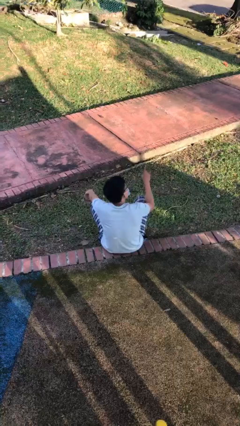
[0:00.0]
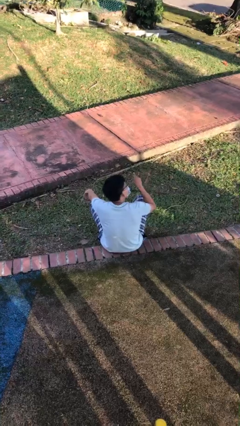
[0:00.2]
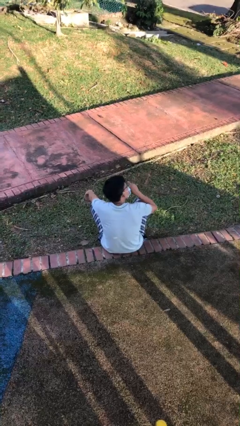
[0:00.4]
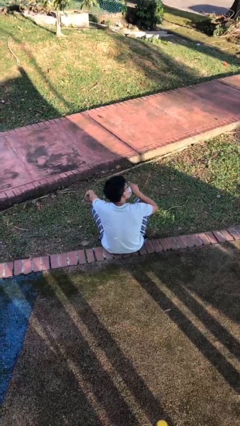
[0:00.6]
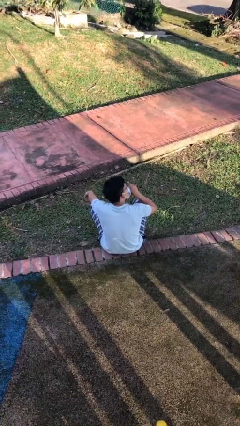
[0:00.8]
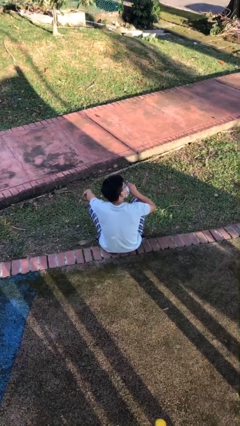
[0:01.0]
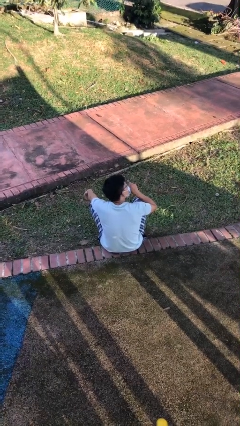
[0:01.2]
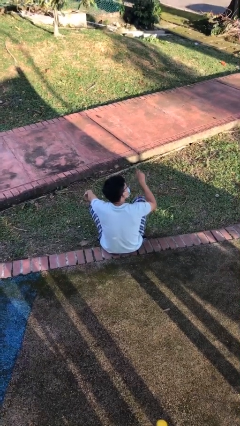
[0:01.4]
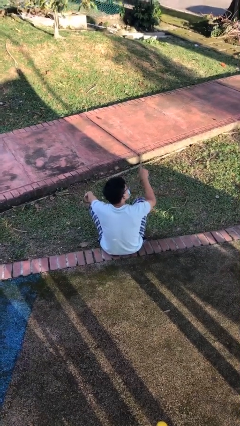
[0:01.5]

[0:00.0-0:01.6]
person gestures be quiet

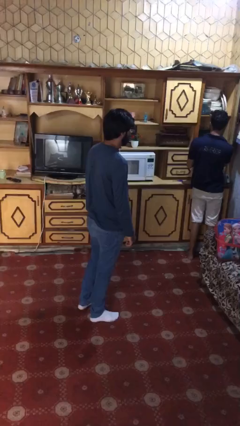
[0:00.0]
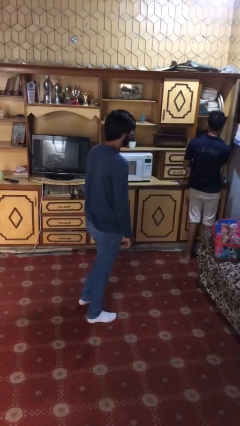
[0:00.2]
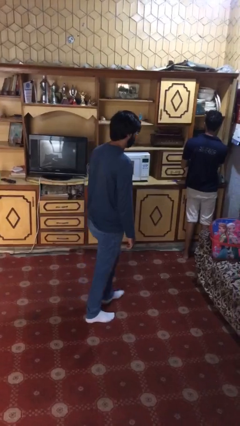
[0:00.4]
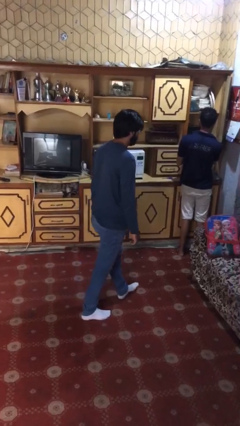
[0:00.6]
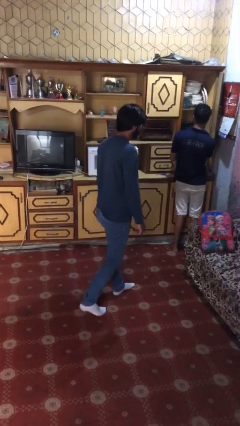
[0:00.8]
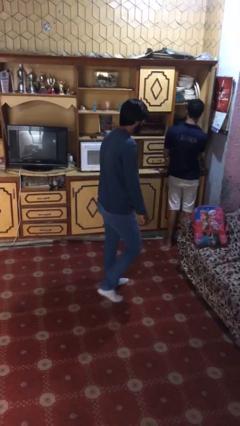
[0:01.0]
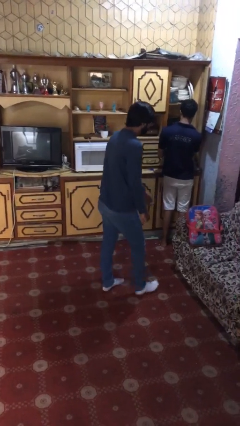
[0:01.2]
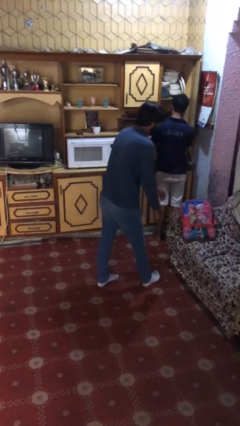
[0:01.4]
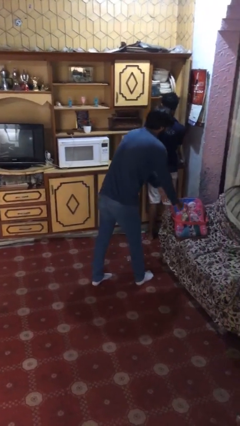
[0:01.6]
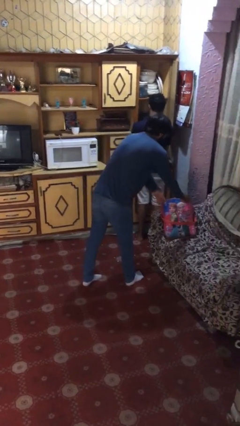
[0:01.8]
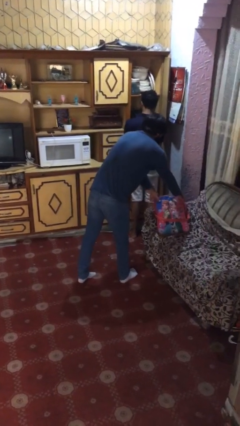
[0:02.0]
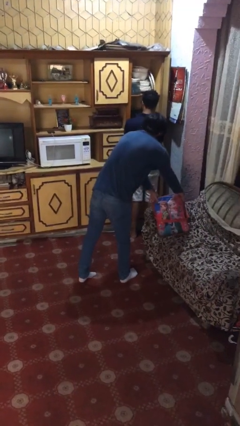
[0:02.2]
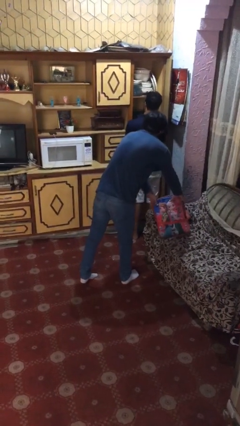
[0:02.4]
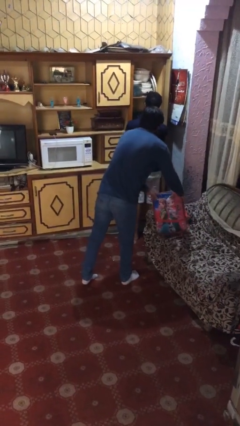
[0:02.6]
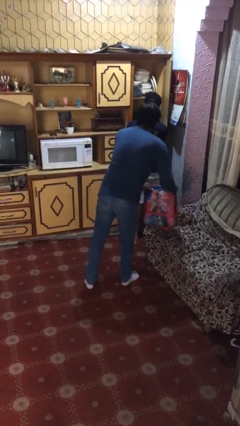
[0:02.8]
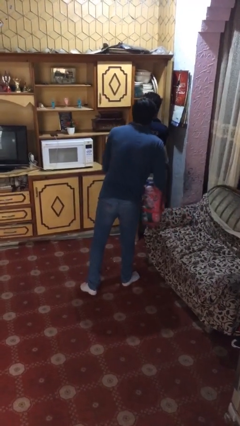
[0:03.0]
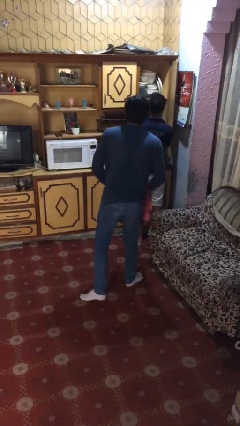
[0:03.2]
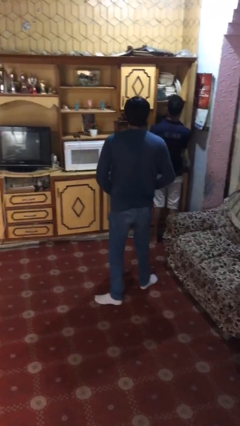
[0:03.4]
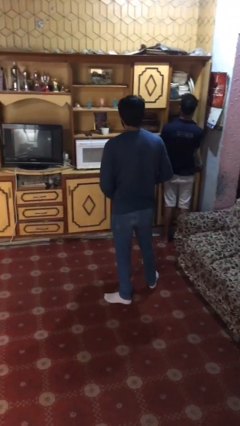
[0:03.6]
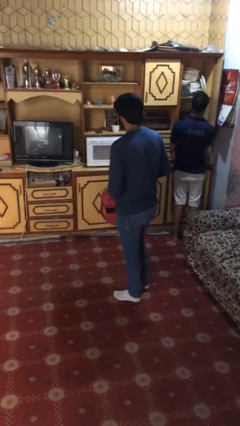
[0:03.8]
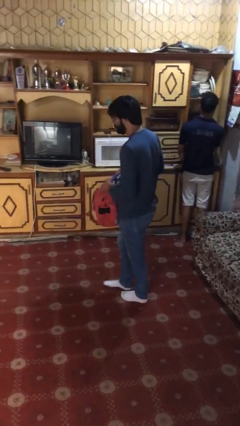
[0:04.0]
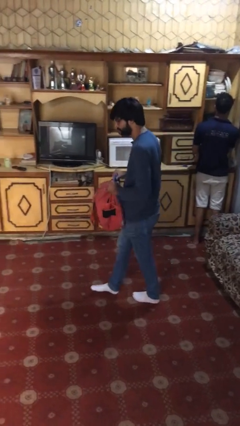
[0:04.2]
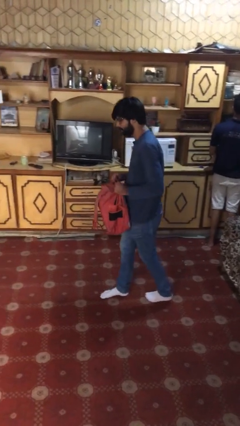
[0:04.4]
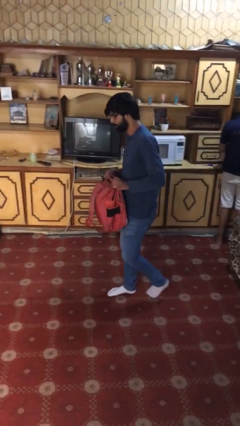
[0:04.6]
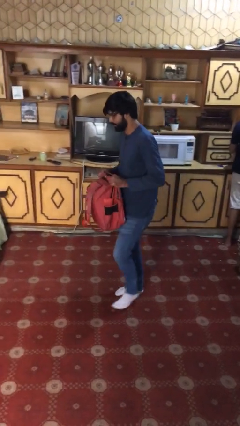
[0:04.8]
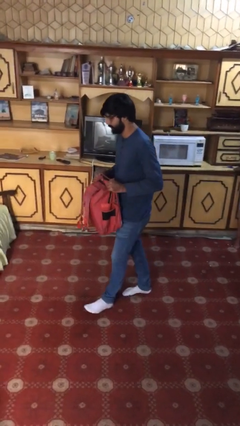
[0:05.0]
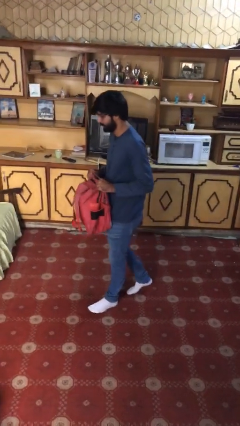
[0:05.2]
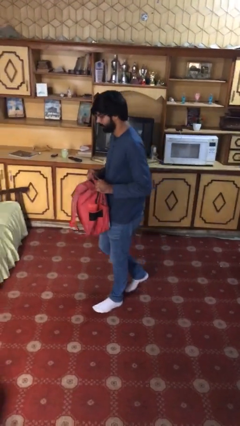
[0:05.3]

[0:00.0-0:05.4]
person steals object from person

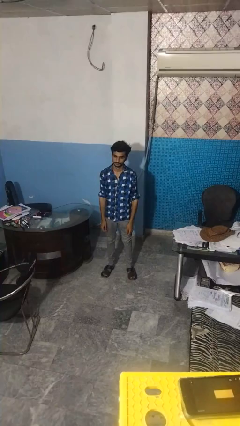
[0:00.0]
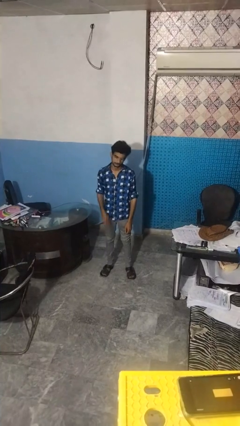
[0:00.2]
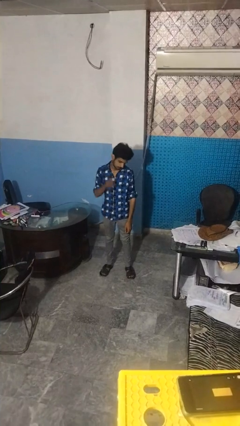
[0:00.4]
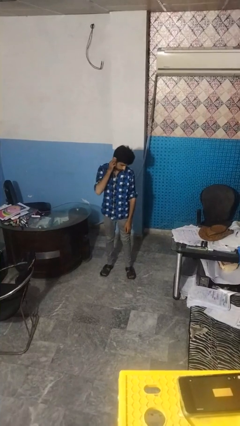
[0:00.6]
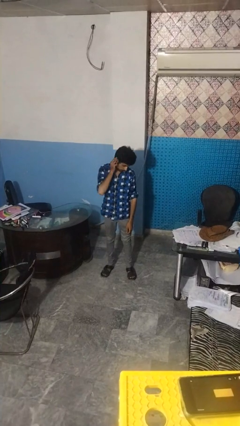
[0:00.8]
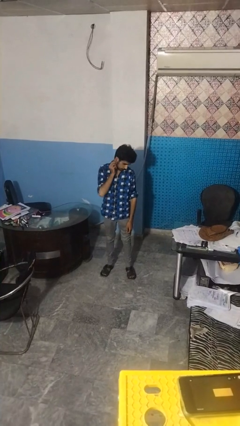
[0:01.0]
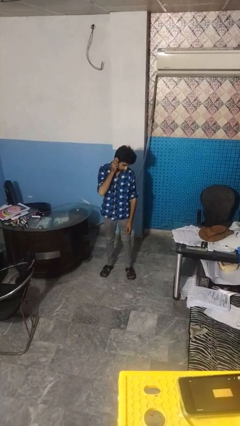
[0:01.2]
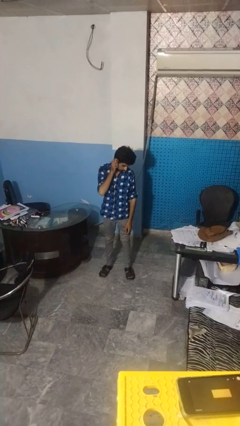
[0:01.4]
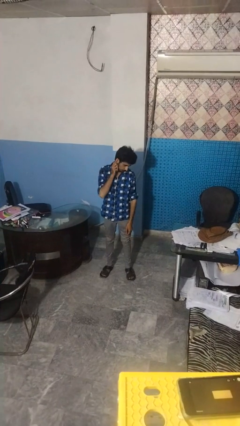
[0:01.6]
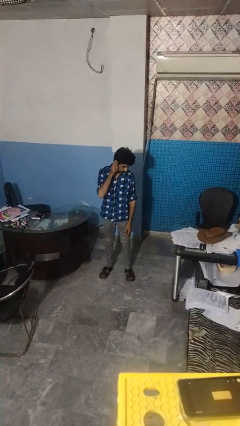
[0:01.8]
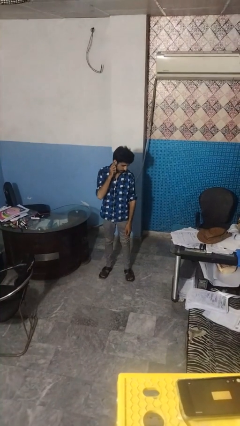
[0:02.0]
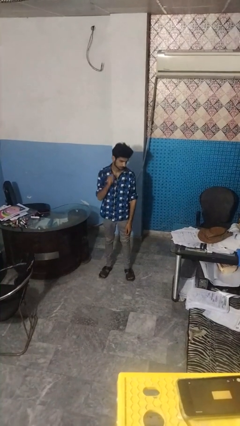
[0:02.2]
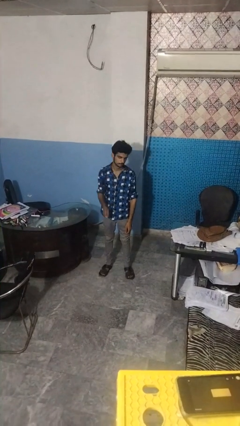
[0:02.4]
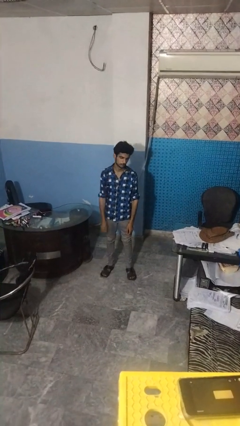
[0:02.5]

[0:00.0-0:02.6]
person touches earlobe

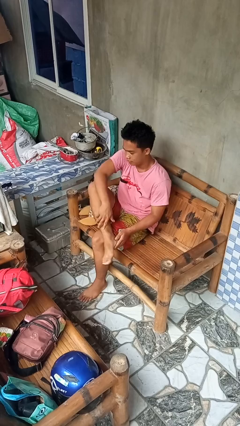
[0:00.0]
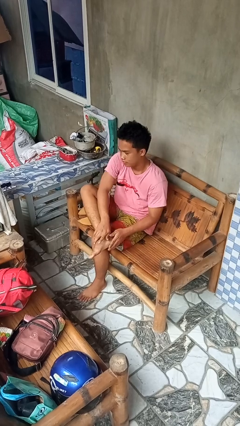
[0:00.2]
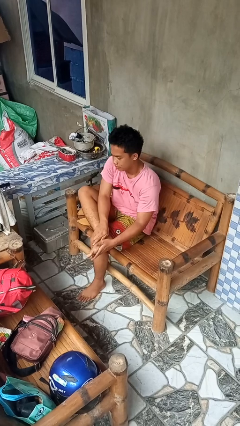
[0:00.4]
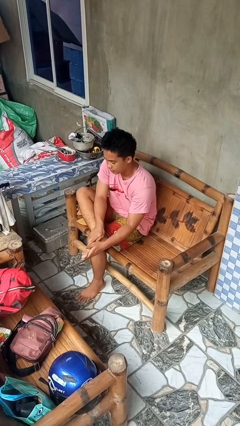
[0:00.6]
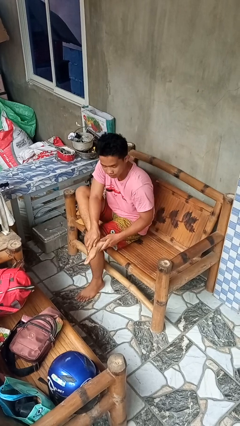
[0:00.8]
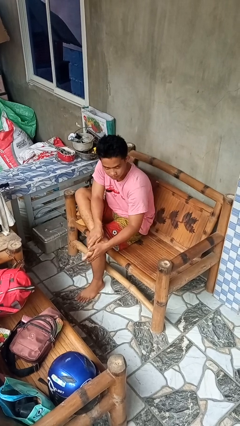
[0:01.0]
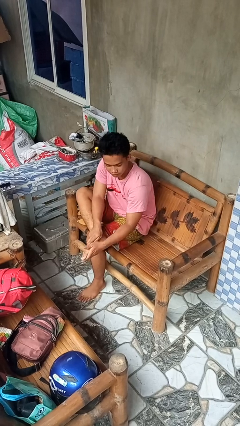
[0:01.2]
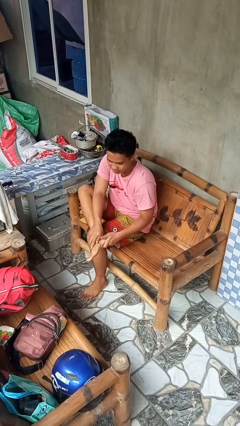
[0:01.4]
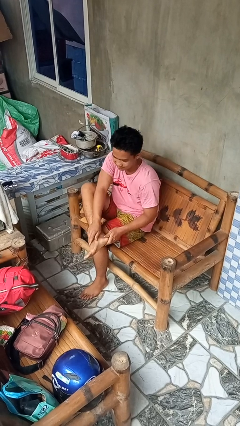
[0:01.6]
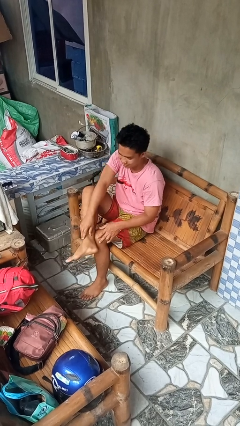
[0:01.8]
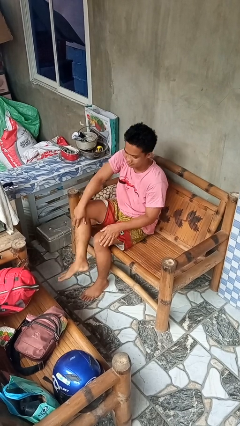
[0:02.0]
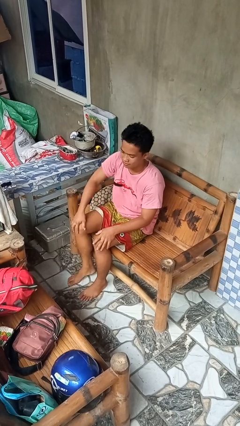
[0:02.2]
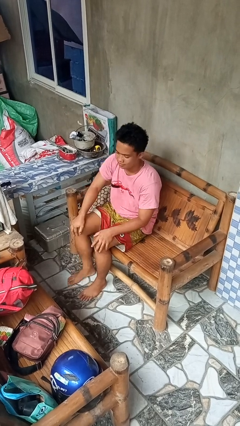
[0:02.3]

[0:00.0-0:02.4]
person rubs foot

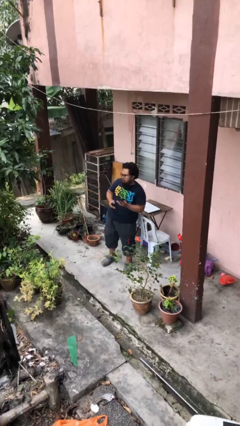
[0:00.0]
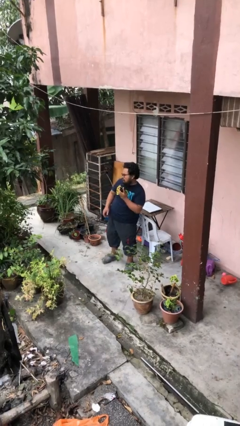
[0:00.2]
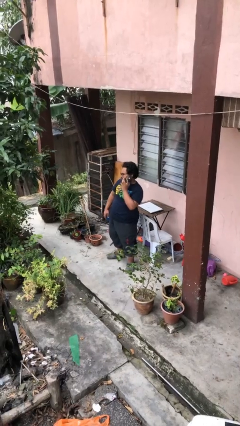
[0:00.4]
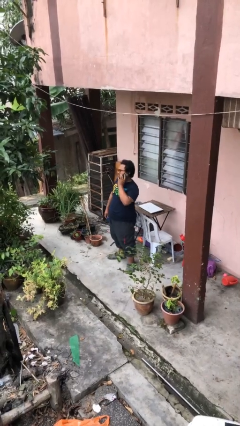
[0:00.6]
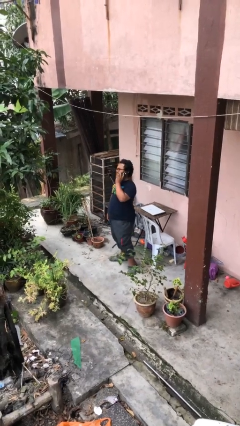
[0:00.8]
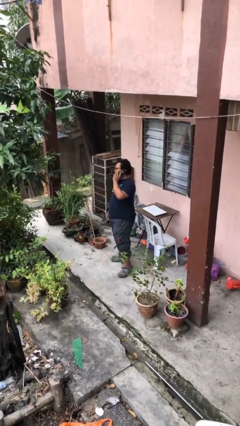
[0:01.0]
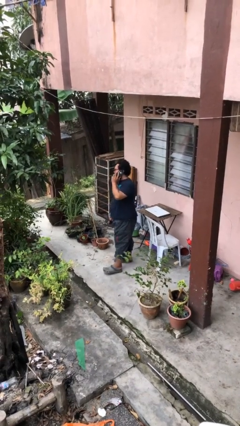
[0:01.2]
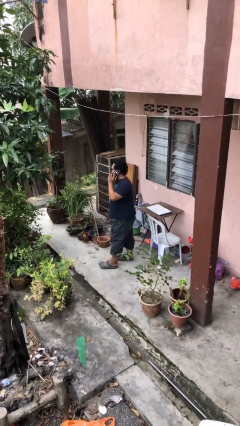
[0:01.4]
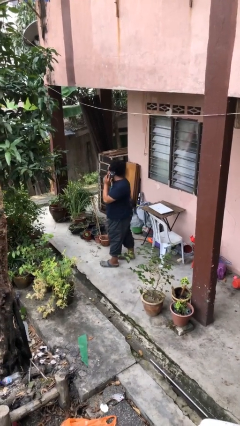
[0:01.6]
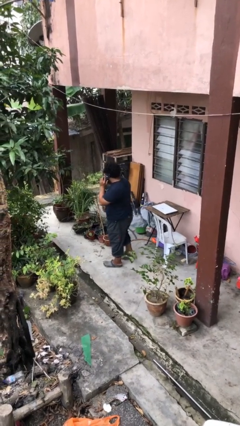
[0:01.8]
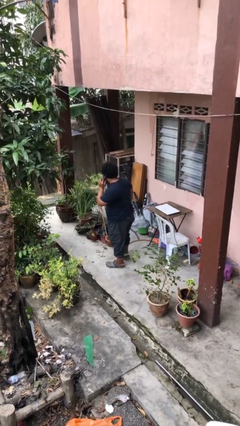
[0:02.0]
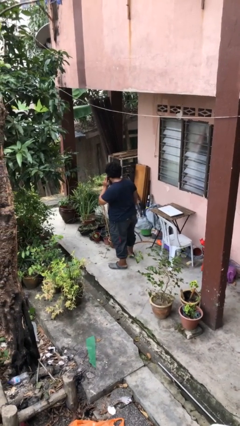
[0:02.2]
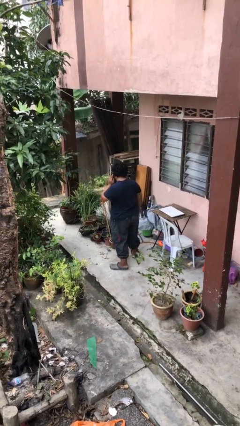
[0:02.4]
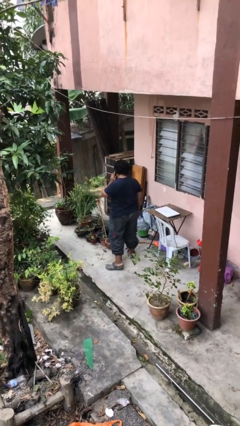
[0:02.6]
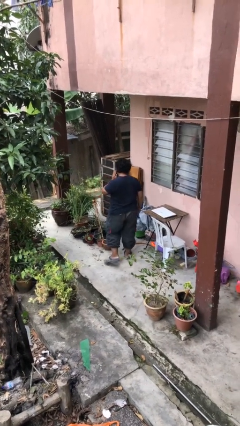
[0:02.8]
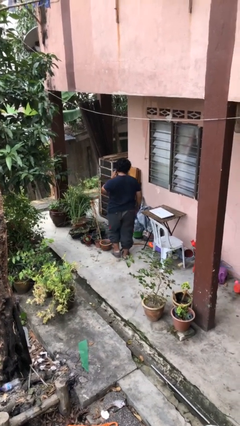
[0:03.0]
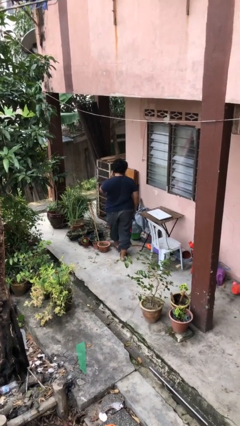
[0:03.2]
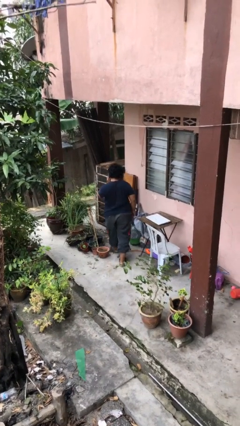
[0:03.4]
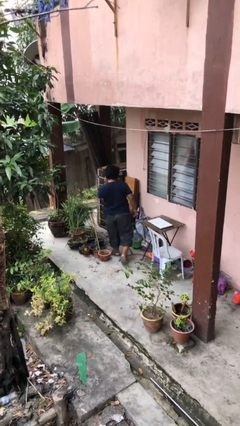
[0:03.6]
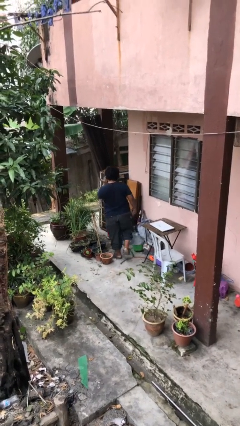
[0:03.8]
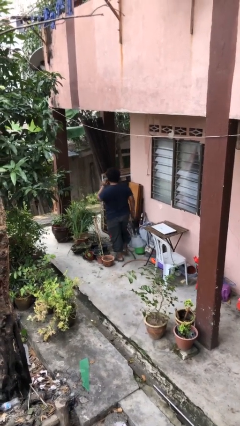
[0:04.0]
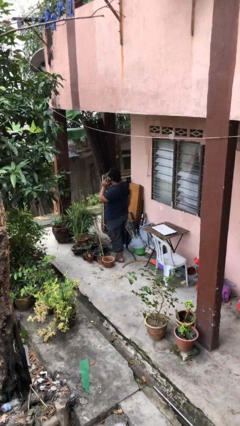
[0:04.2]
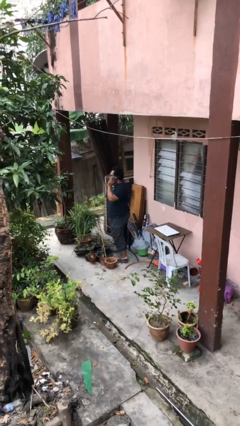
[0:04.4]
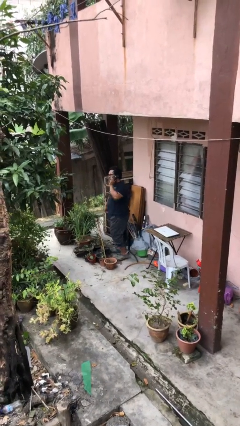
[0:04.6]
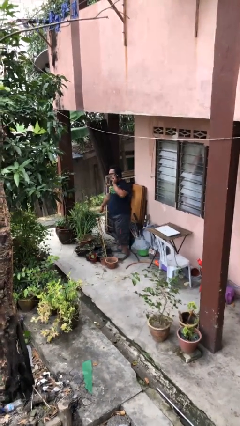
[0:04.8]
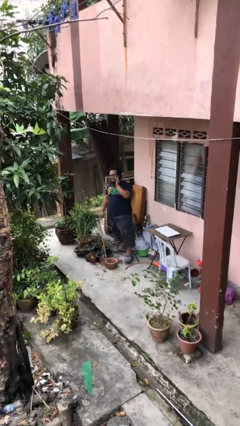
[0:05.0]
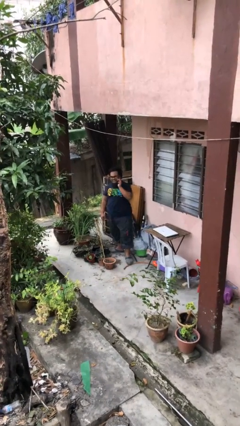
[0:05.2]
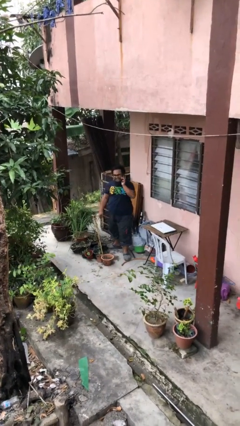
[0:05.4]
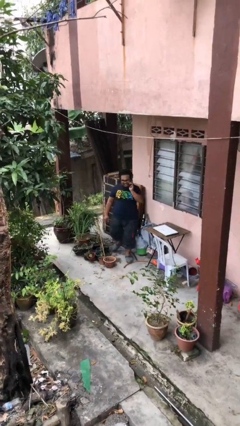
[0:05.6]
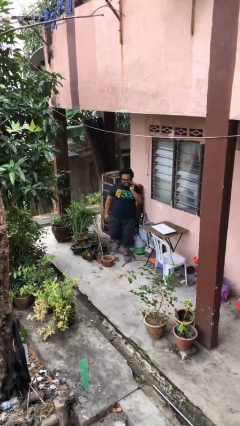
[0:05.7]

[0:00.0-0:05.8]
person talks on phone
